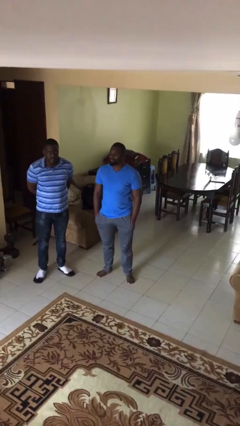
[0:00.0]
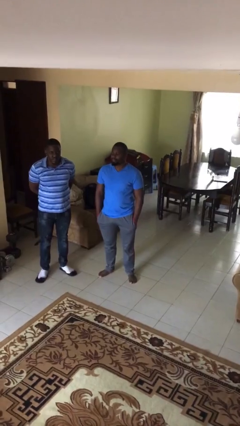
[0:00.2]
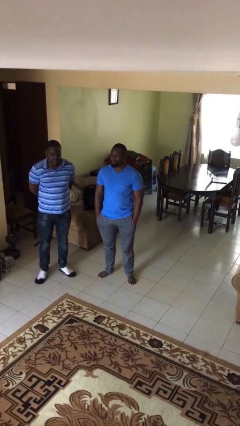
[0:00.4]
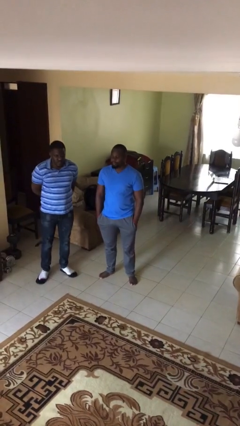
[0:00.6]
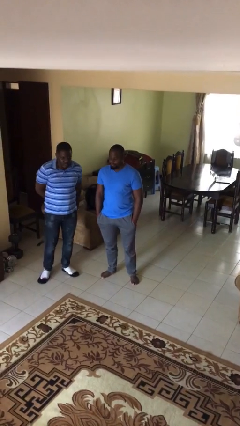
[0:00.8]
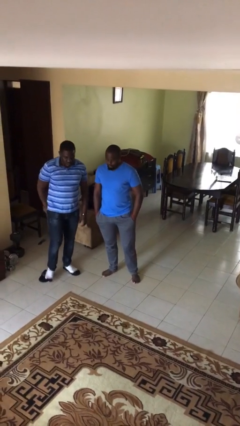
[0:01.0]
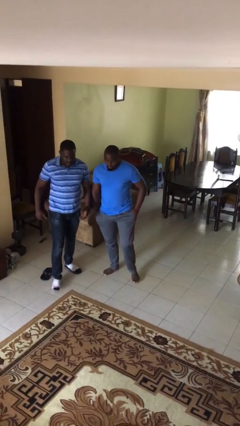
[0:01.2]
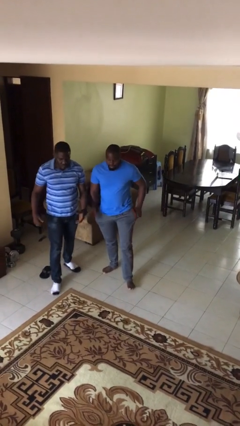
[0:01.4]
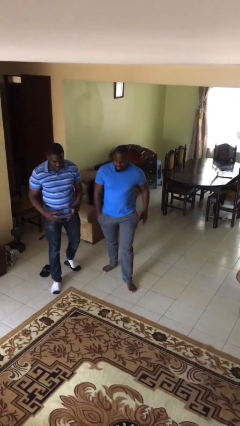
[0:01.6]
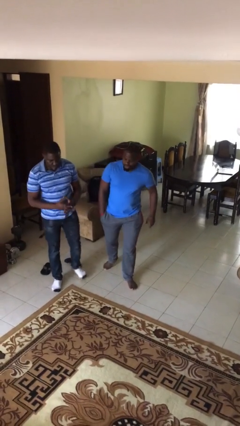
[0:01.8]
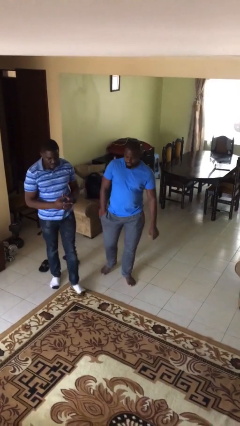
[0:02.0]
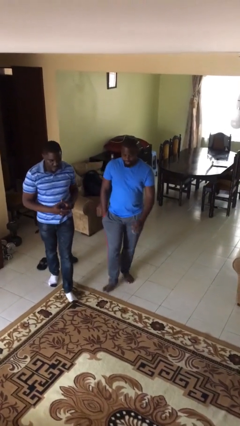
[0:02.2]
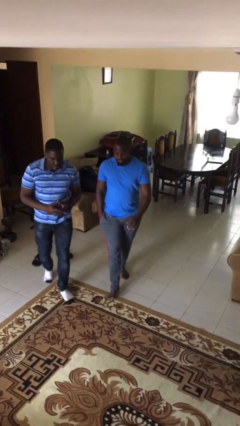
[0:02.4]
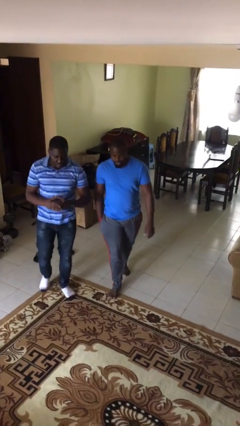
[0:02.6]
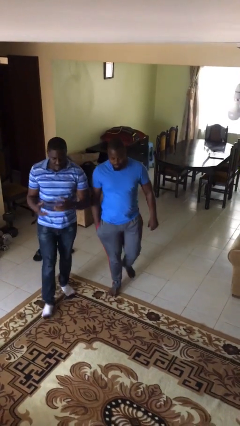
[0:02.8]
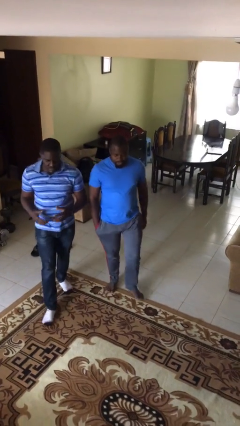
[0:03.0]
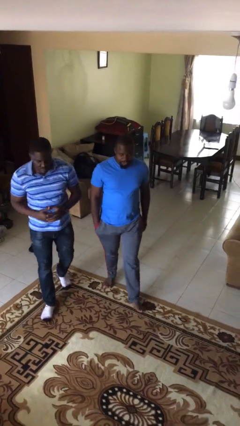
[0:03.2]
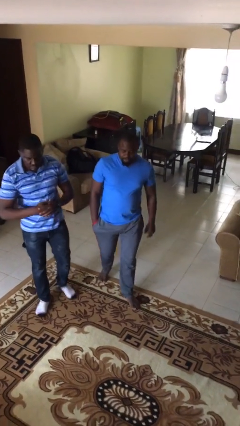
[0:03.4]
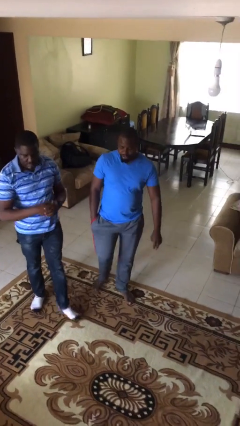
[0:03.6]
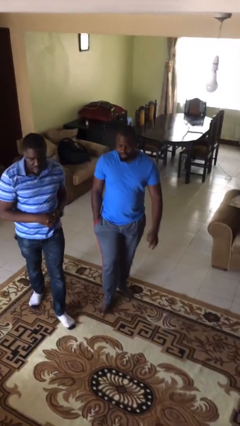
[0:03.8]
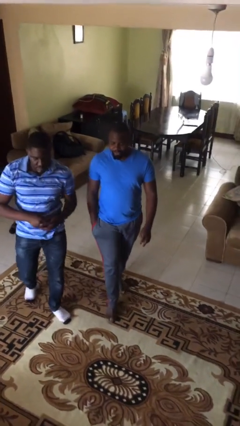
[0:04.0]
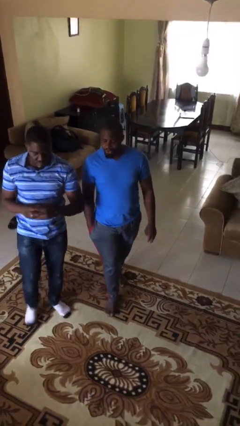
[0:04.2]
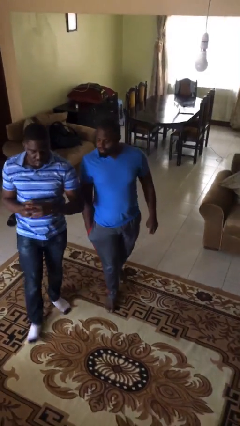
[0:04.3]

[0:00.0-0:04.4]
person talks to person

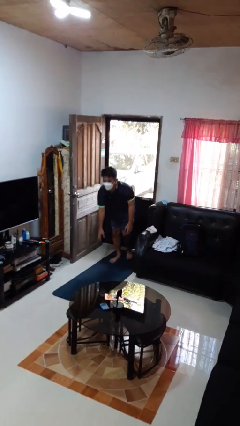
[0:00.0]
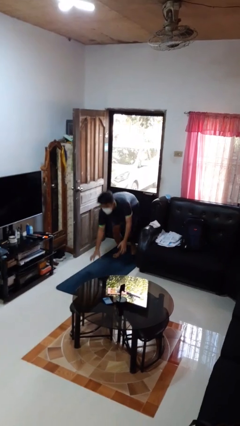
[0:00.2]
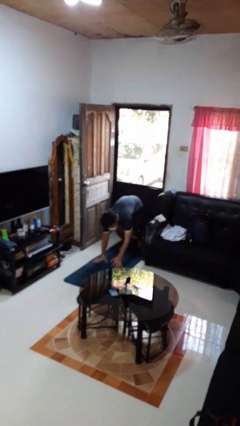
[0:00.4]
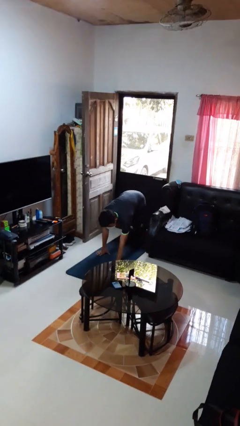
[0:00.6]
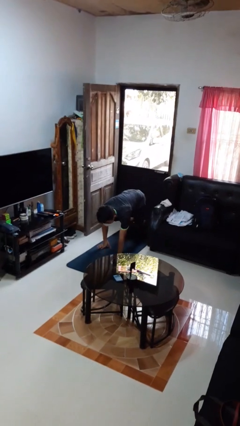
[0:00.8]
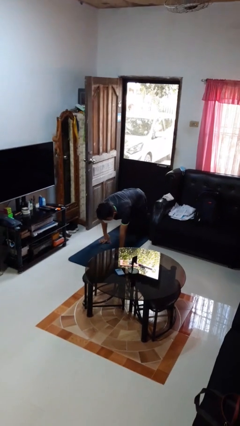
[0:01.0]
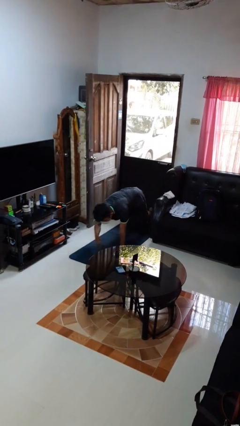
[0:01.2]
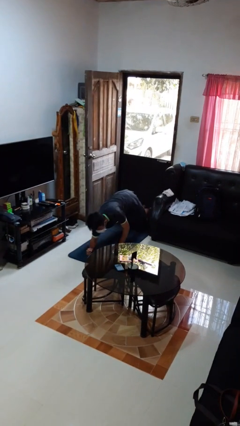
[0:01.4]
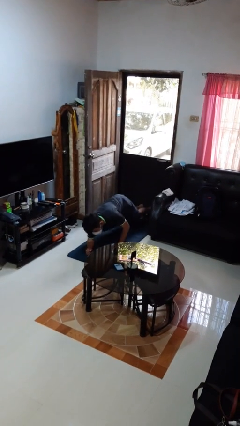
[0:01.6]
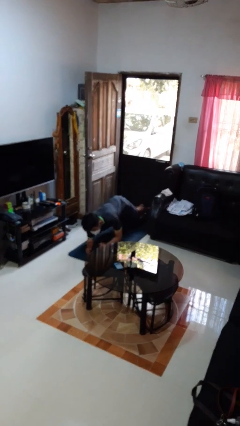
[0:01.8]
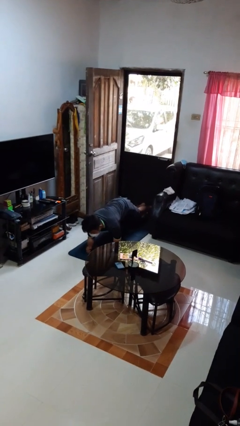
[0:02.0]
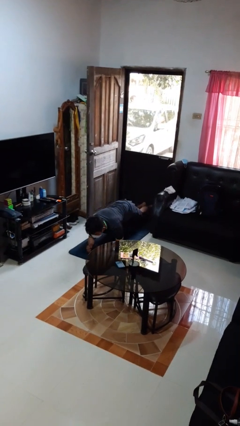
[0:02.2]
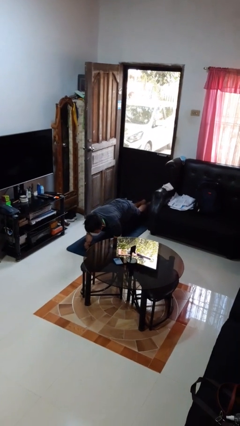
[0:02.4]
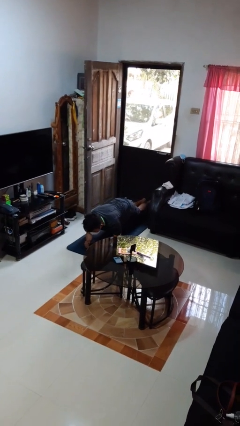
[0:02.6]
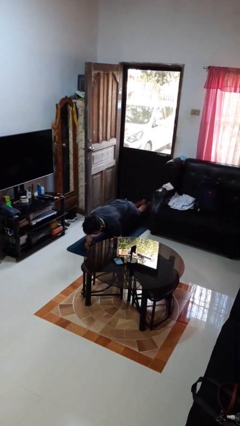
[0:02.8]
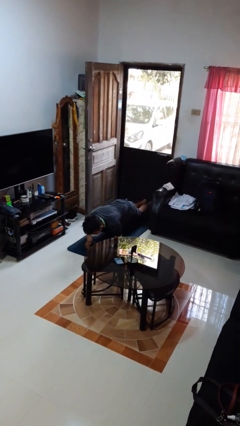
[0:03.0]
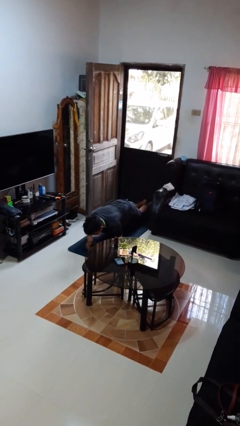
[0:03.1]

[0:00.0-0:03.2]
person exercises with plank

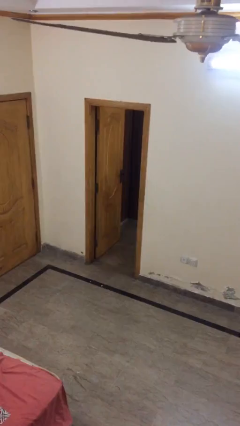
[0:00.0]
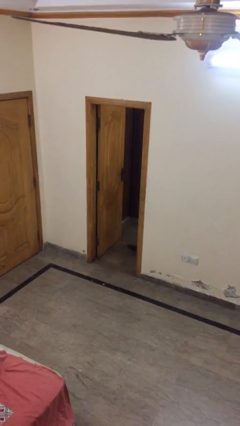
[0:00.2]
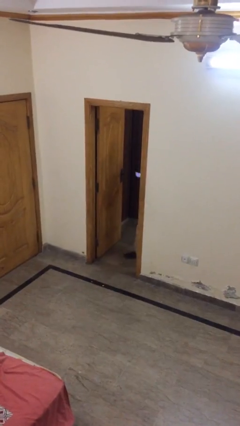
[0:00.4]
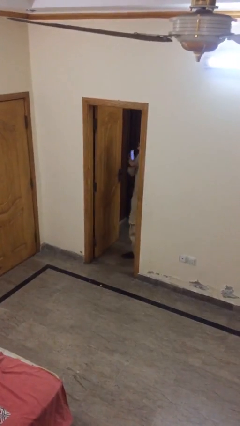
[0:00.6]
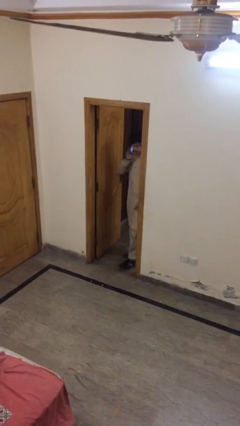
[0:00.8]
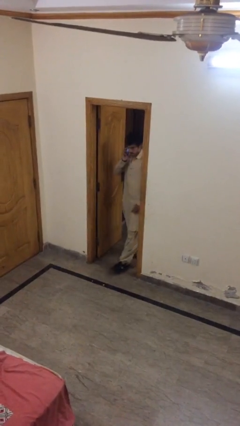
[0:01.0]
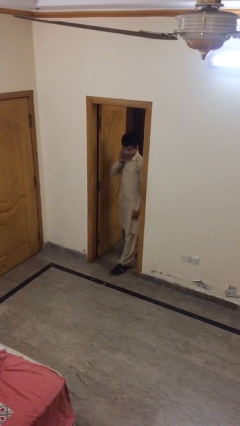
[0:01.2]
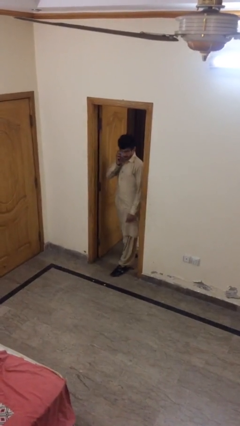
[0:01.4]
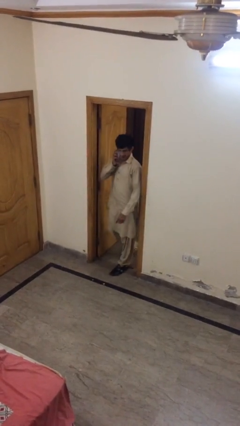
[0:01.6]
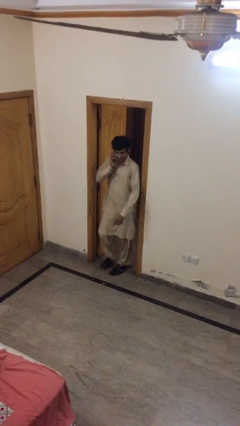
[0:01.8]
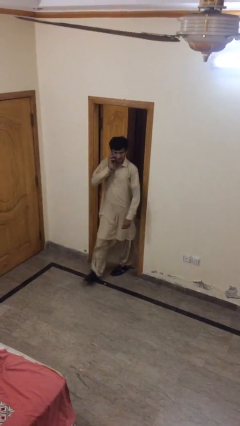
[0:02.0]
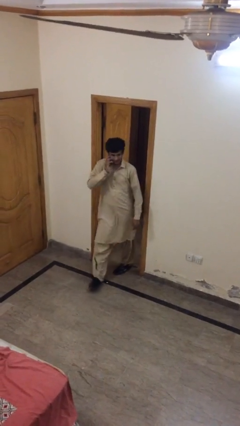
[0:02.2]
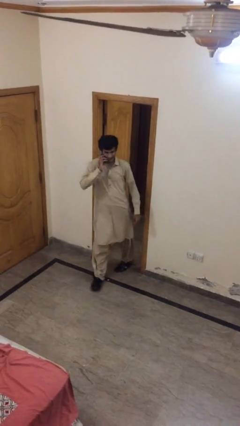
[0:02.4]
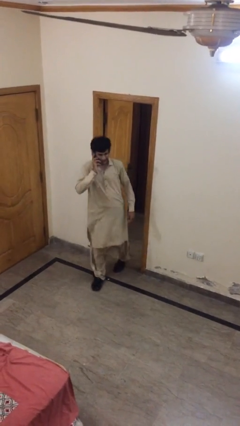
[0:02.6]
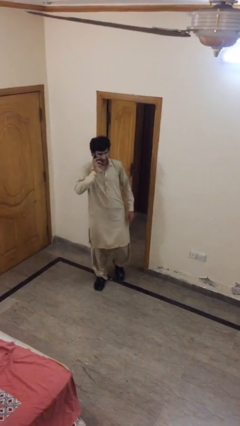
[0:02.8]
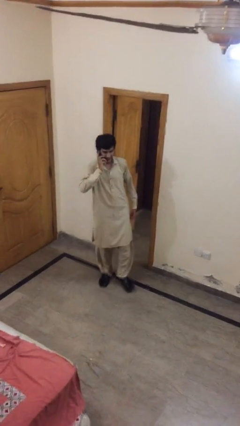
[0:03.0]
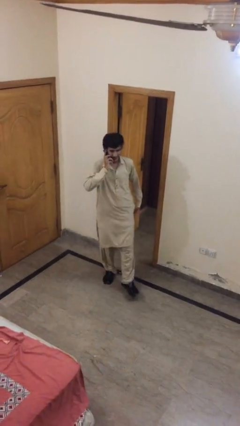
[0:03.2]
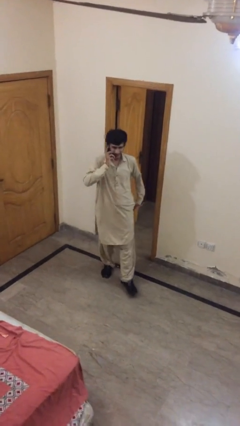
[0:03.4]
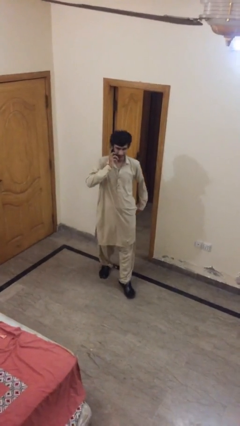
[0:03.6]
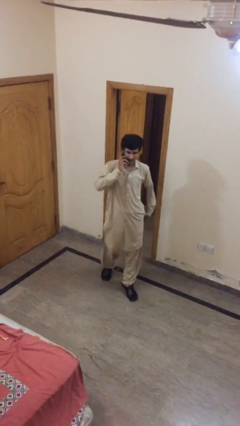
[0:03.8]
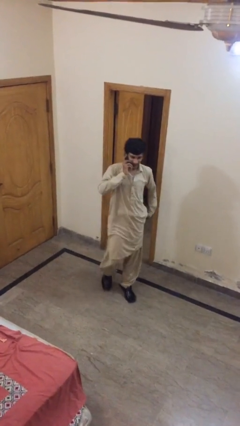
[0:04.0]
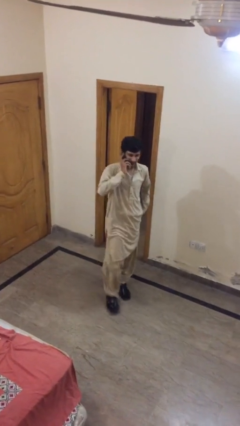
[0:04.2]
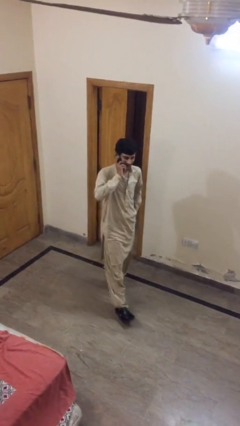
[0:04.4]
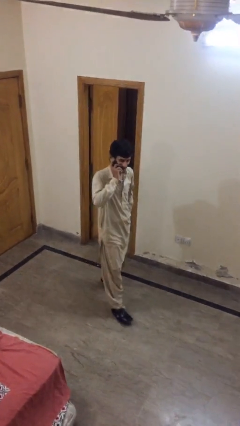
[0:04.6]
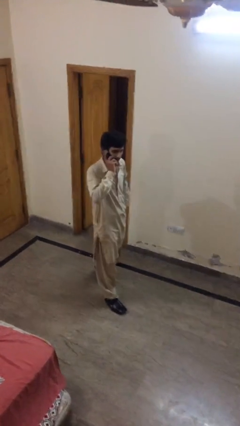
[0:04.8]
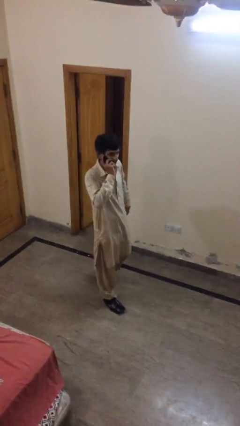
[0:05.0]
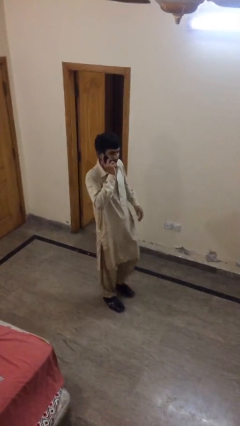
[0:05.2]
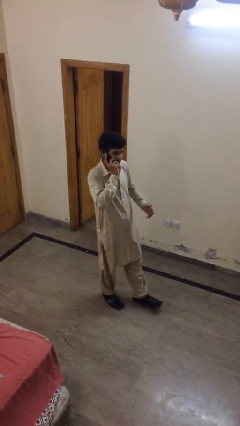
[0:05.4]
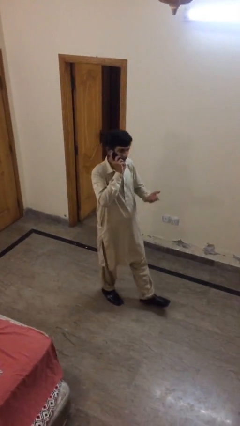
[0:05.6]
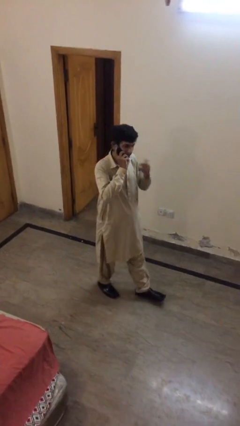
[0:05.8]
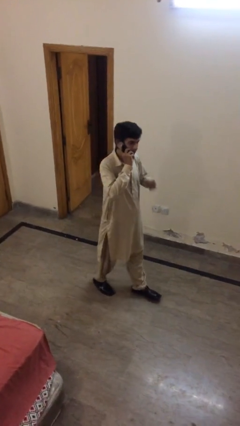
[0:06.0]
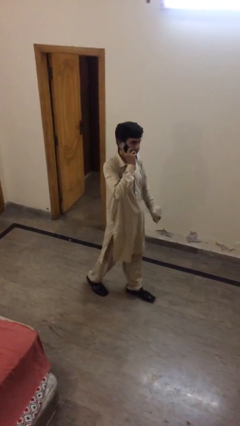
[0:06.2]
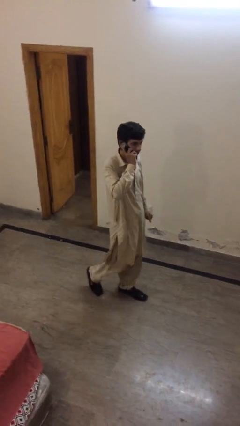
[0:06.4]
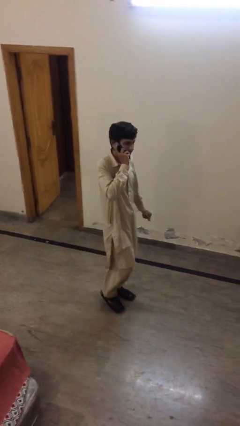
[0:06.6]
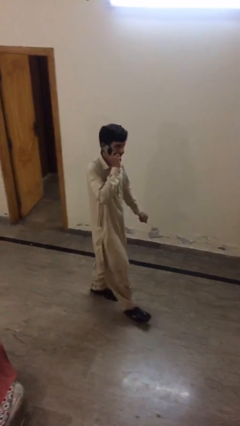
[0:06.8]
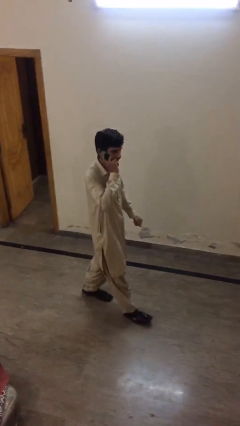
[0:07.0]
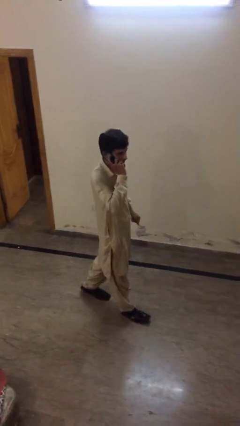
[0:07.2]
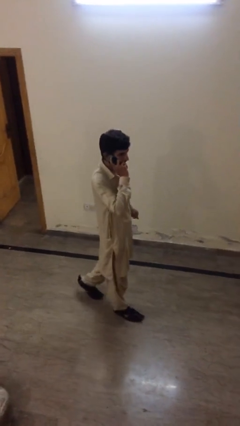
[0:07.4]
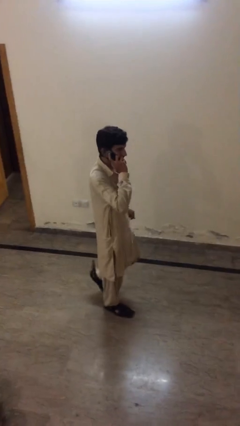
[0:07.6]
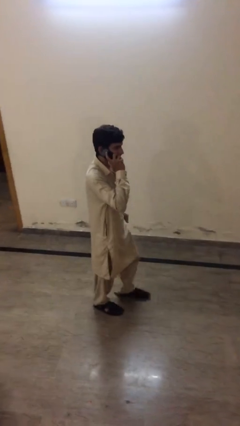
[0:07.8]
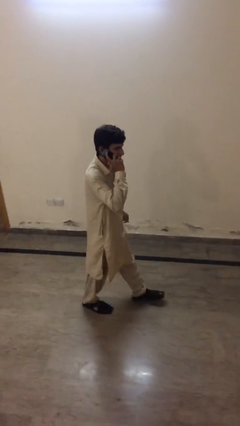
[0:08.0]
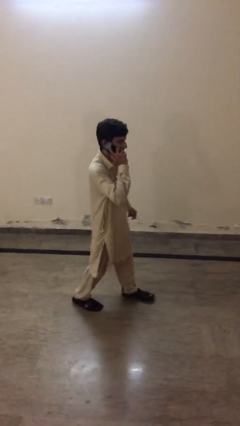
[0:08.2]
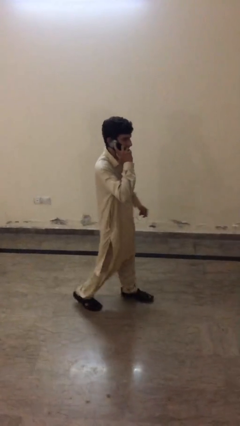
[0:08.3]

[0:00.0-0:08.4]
person enters scene through structure

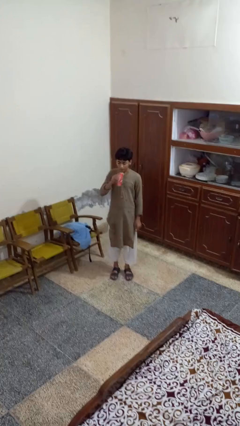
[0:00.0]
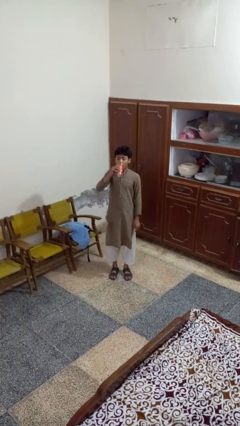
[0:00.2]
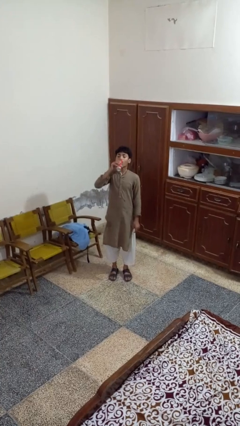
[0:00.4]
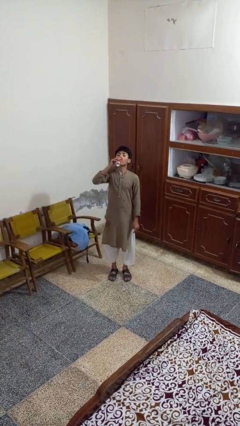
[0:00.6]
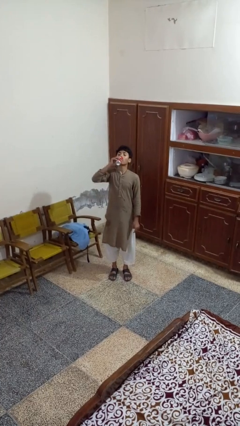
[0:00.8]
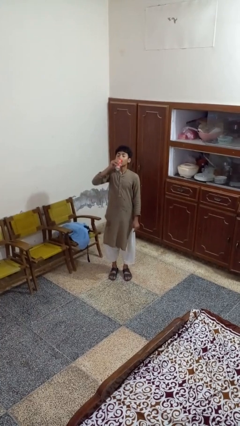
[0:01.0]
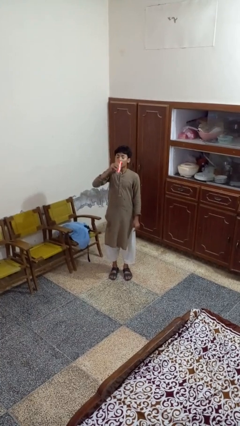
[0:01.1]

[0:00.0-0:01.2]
person drinks from beverage can

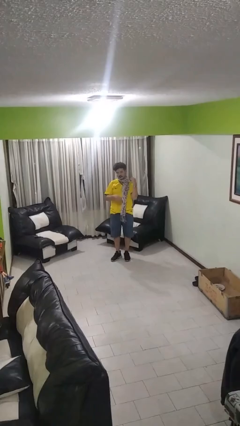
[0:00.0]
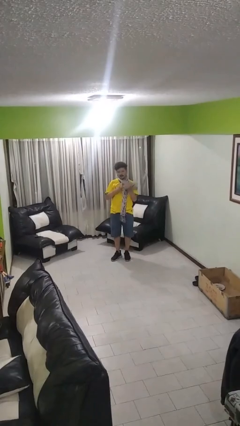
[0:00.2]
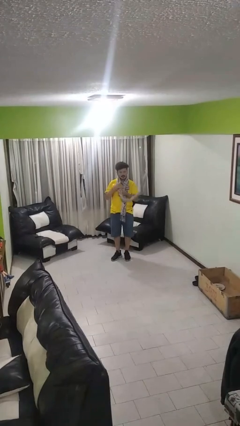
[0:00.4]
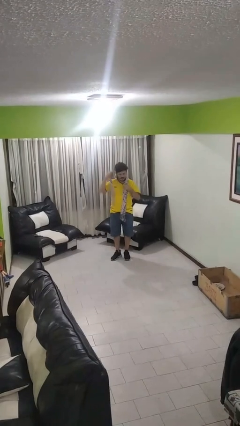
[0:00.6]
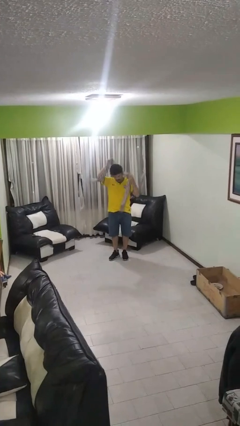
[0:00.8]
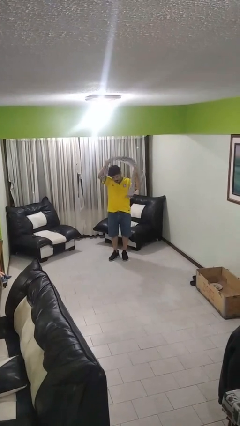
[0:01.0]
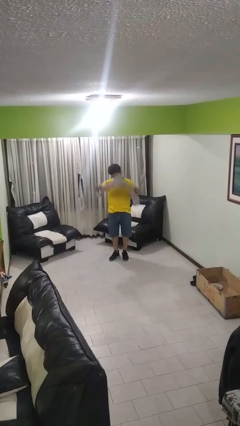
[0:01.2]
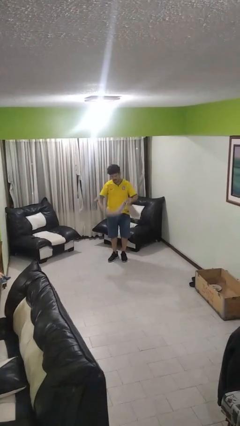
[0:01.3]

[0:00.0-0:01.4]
person takes off scarf
